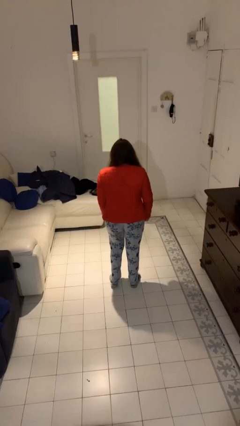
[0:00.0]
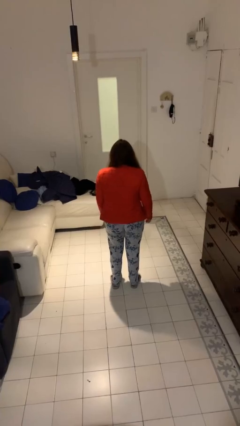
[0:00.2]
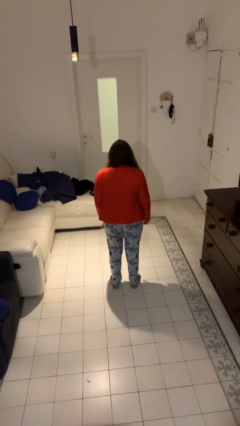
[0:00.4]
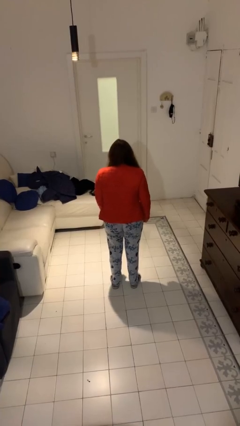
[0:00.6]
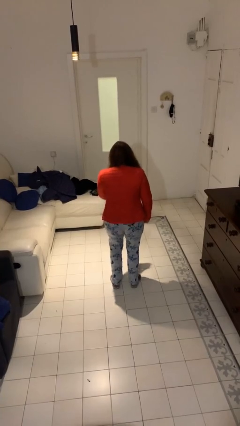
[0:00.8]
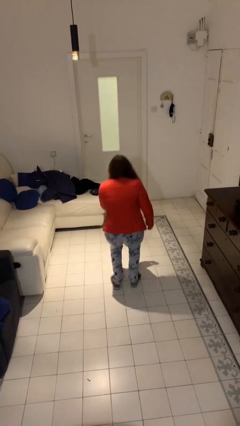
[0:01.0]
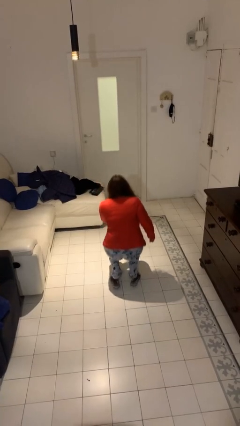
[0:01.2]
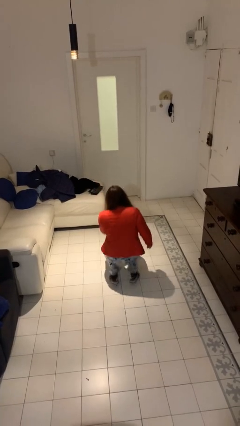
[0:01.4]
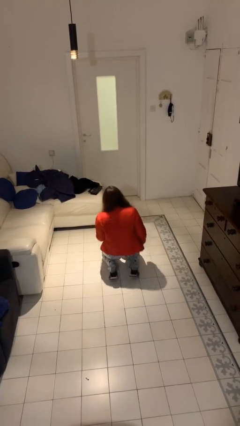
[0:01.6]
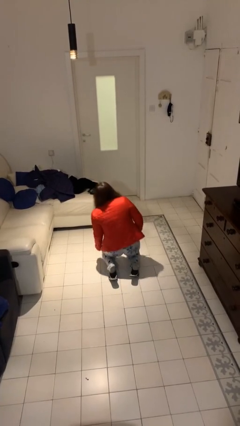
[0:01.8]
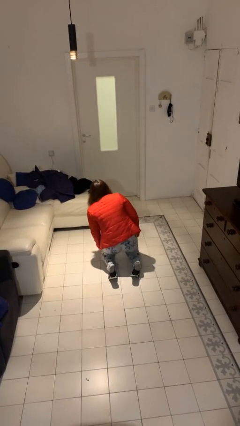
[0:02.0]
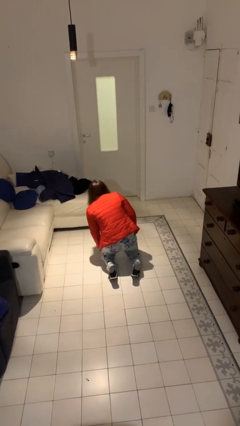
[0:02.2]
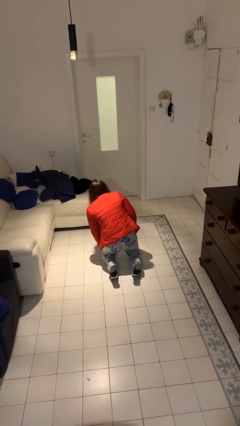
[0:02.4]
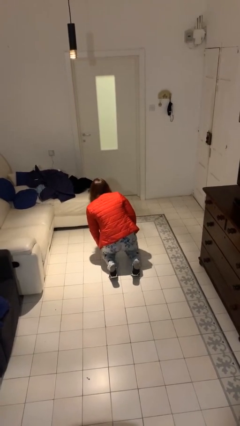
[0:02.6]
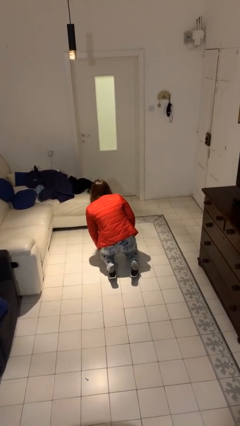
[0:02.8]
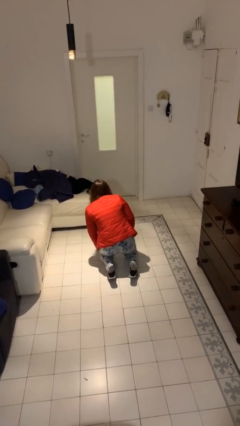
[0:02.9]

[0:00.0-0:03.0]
person falls while standing

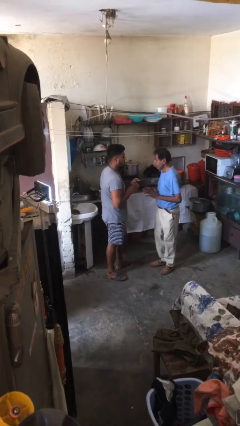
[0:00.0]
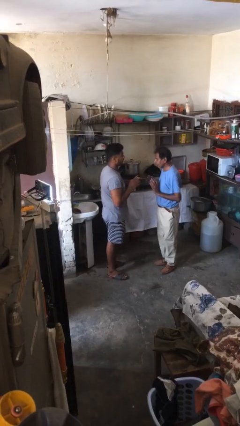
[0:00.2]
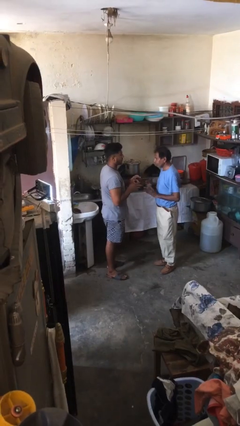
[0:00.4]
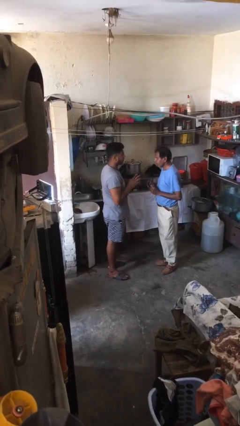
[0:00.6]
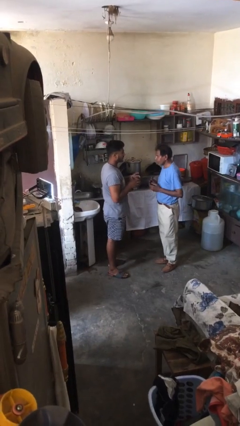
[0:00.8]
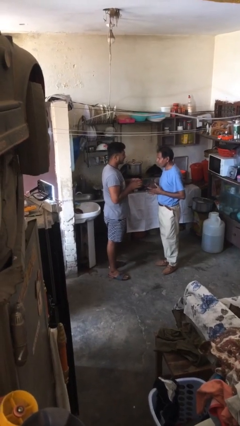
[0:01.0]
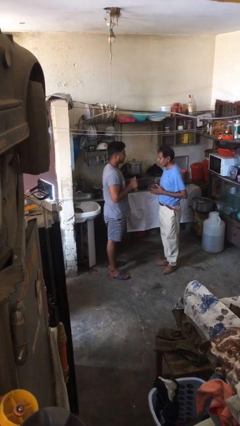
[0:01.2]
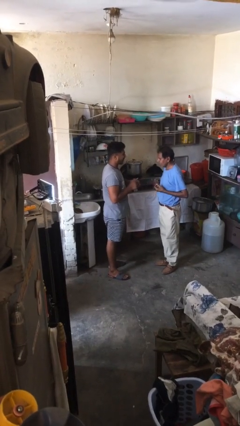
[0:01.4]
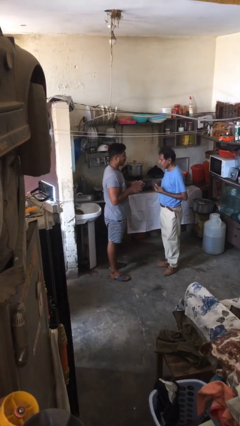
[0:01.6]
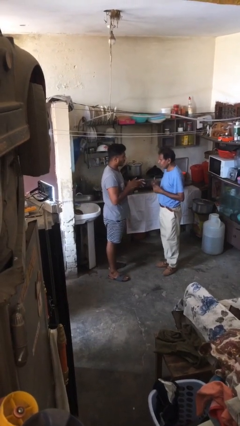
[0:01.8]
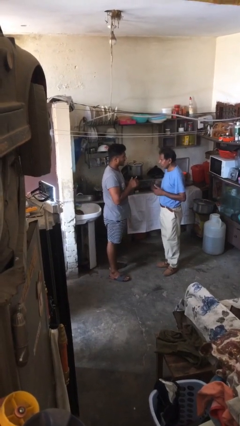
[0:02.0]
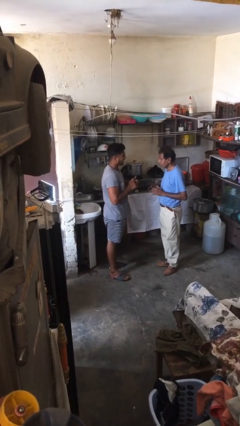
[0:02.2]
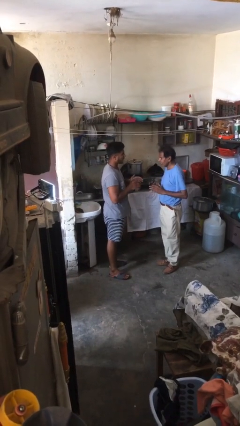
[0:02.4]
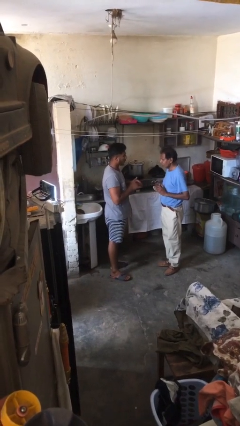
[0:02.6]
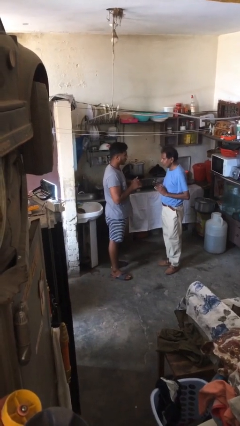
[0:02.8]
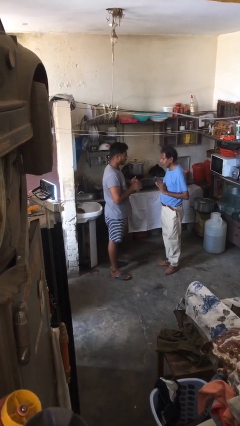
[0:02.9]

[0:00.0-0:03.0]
person talks to person

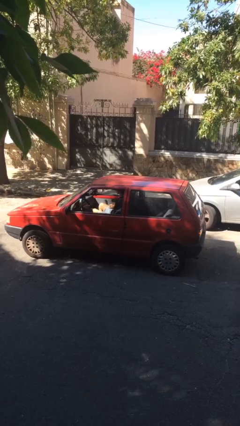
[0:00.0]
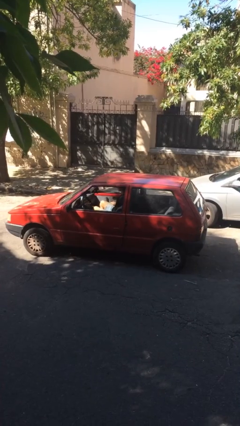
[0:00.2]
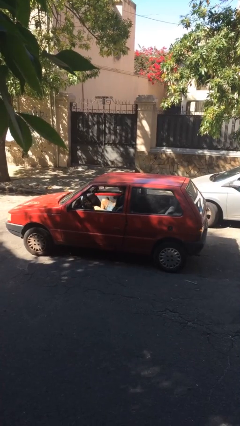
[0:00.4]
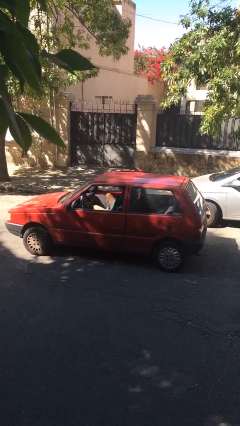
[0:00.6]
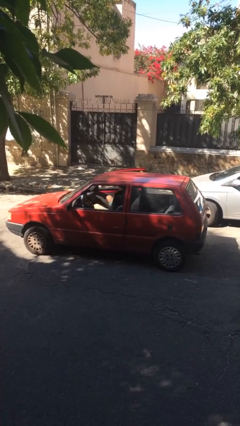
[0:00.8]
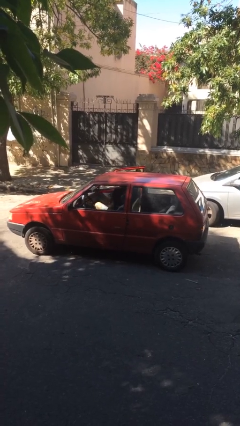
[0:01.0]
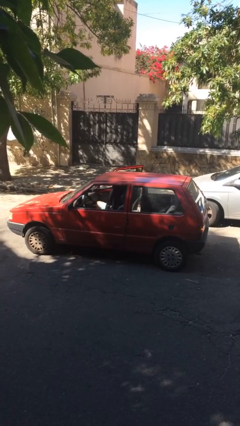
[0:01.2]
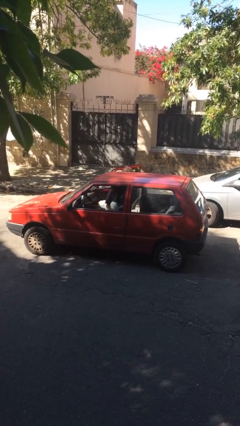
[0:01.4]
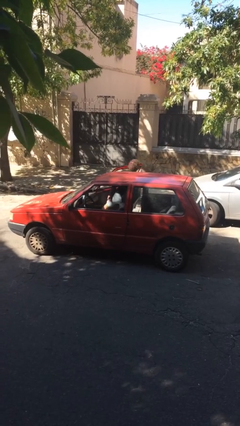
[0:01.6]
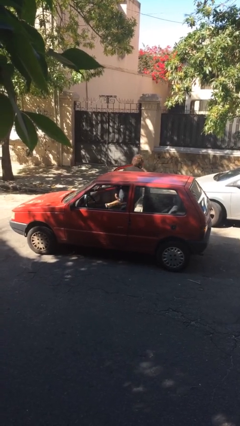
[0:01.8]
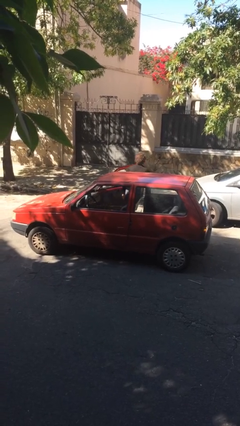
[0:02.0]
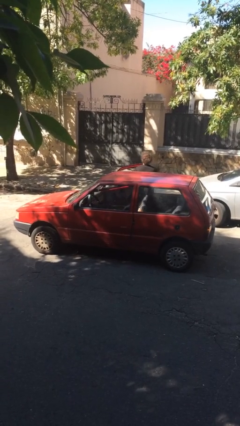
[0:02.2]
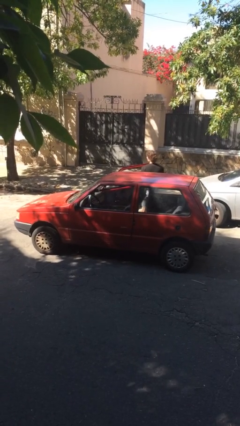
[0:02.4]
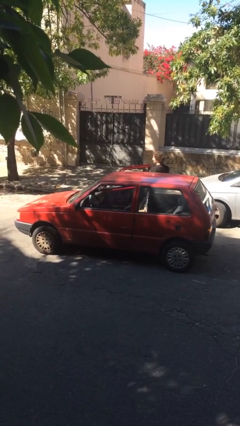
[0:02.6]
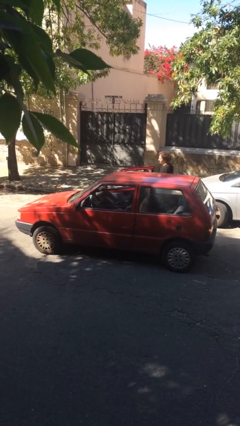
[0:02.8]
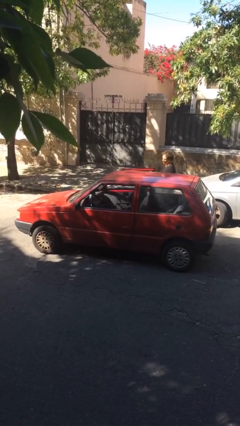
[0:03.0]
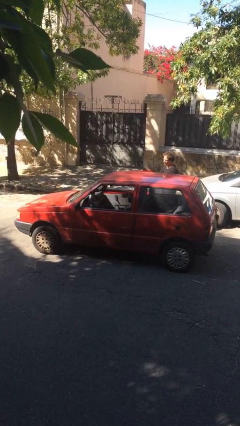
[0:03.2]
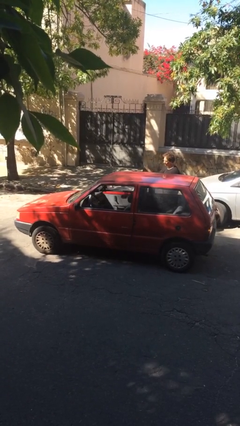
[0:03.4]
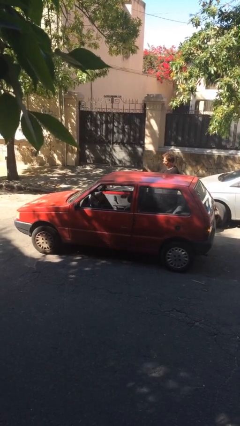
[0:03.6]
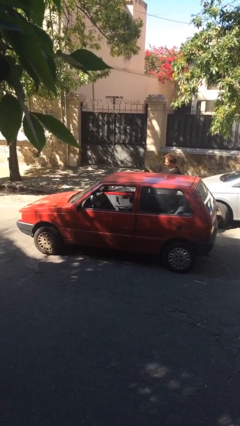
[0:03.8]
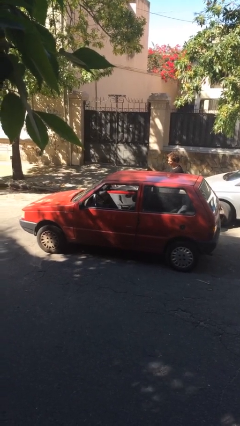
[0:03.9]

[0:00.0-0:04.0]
car drops off person

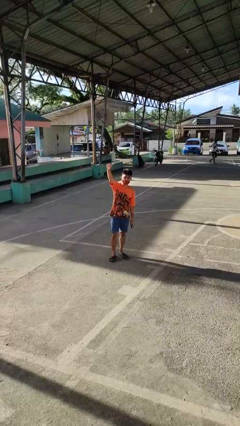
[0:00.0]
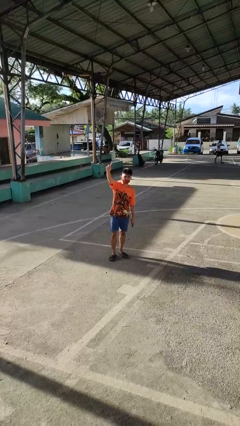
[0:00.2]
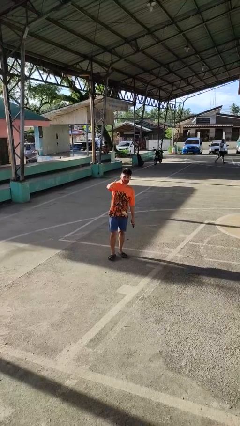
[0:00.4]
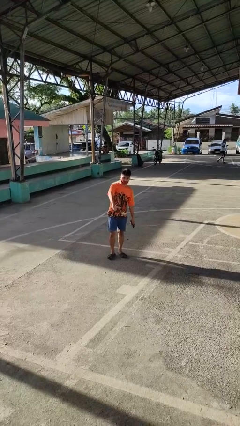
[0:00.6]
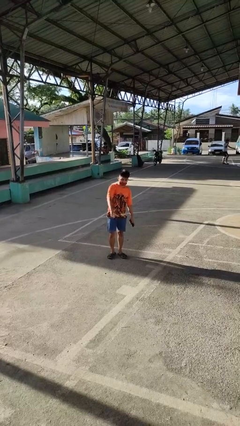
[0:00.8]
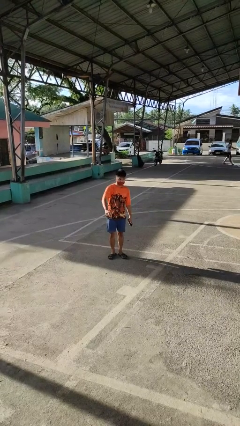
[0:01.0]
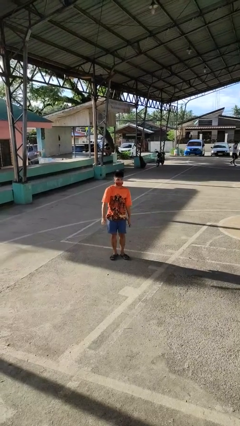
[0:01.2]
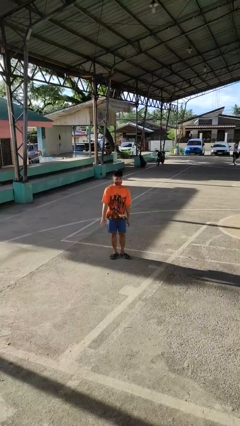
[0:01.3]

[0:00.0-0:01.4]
person gestures swipe down

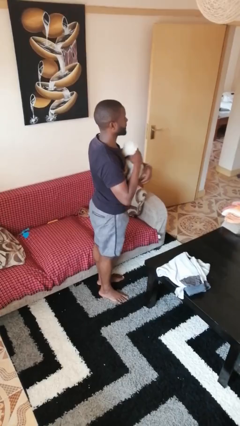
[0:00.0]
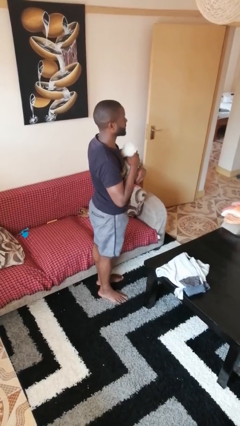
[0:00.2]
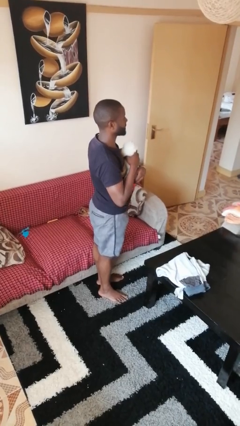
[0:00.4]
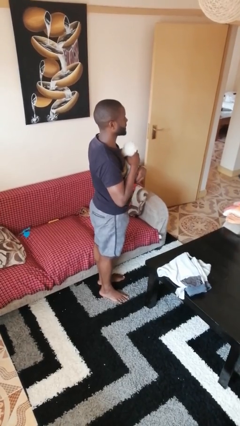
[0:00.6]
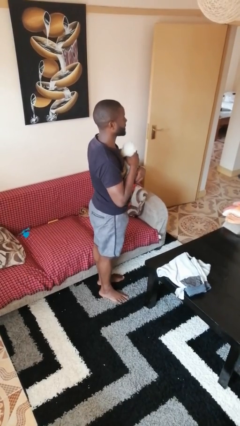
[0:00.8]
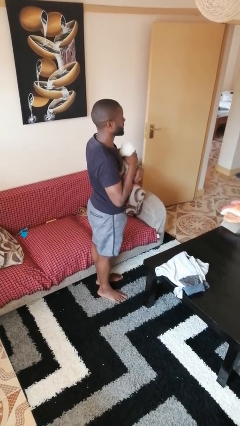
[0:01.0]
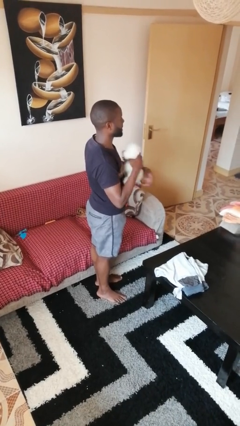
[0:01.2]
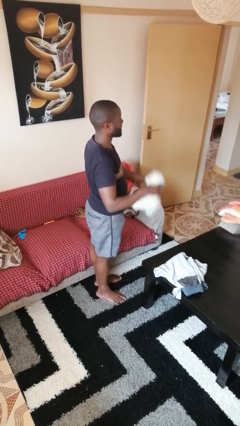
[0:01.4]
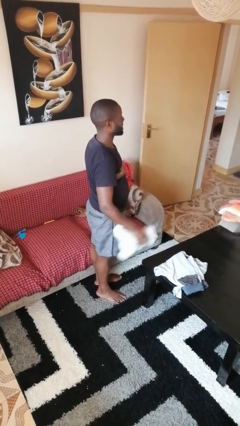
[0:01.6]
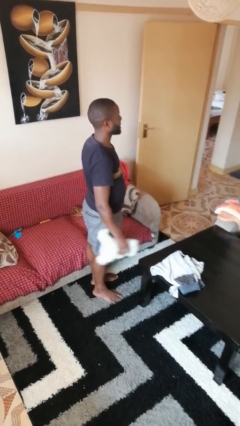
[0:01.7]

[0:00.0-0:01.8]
person hugs stuffed animal

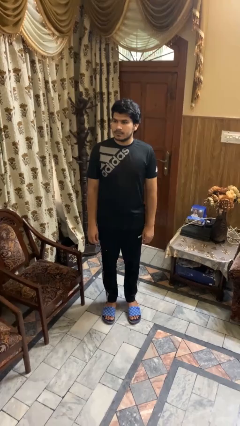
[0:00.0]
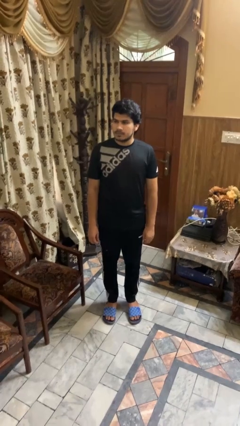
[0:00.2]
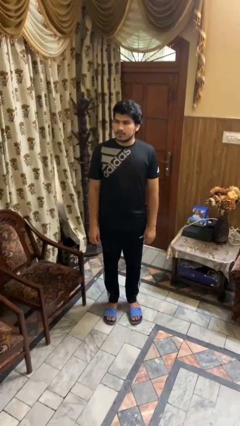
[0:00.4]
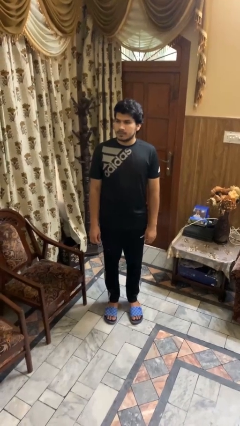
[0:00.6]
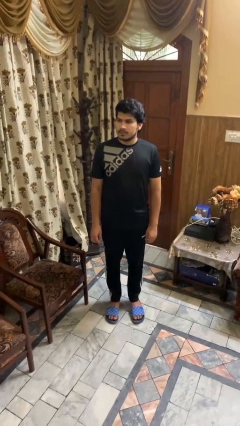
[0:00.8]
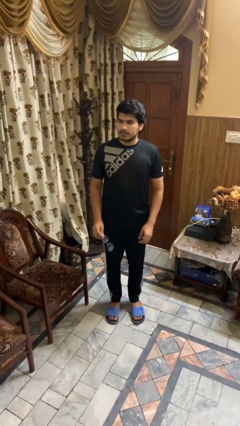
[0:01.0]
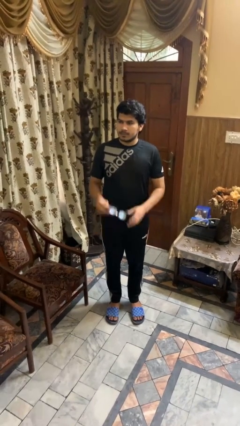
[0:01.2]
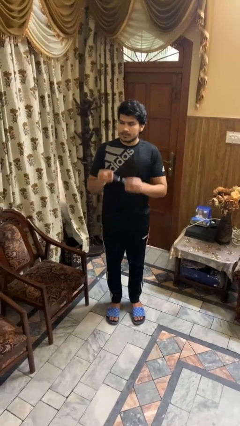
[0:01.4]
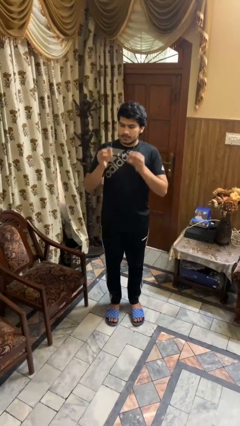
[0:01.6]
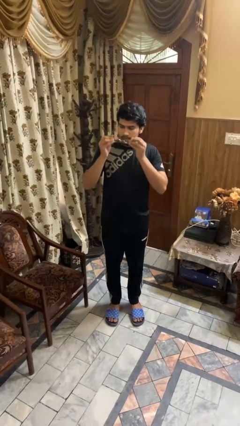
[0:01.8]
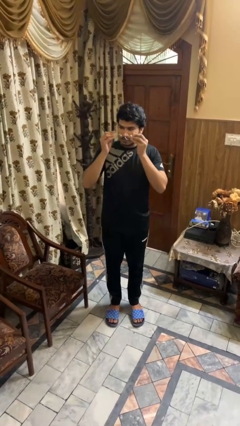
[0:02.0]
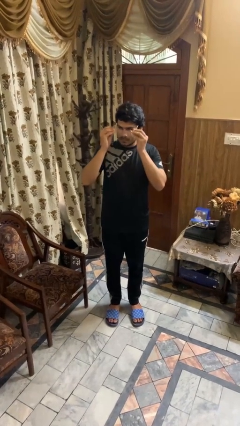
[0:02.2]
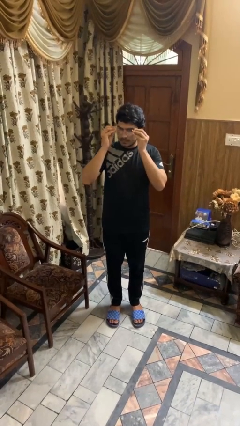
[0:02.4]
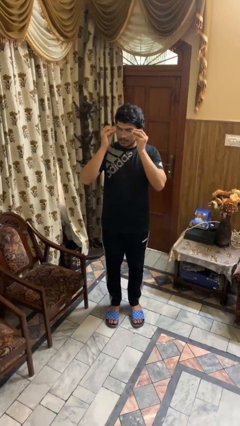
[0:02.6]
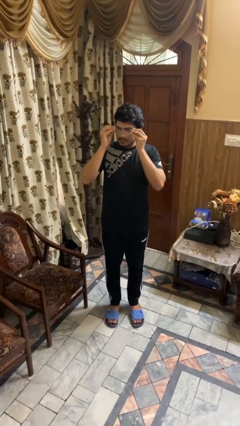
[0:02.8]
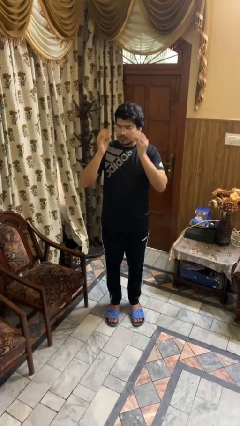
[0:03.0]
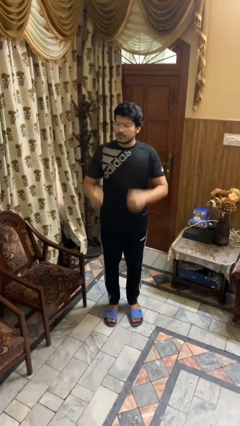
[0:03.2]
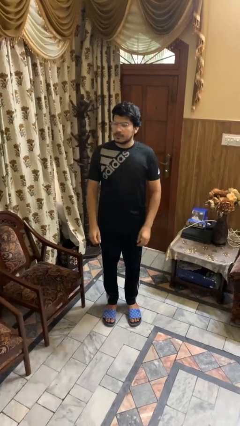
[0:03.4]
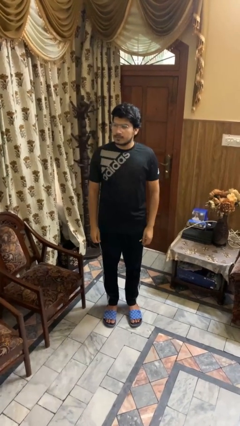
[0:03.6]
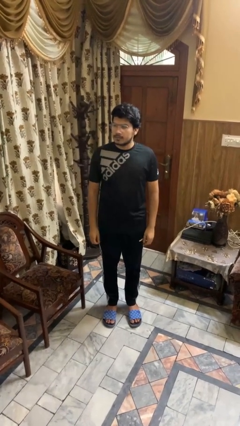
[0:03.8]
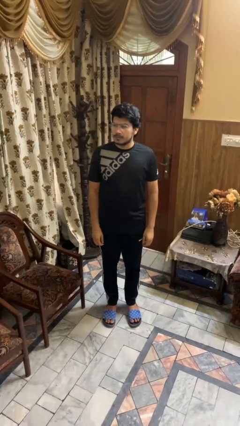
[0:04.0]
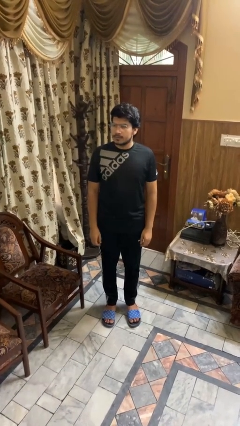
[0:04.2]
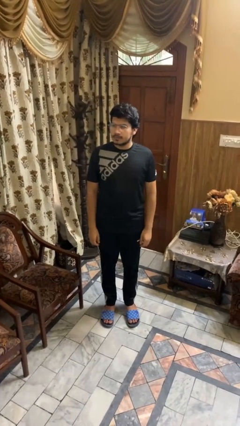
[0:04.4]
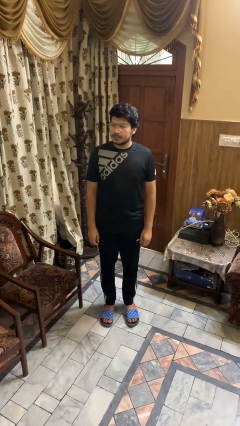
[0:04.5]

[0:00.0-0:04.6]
person puts on glasses
